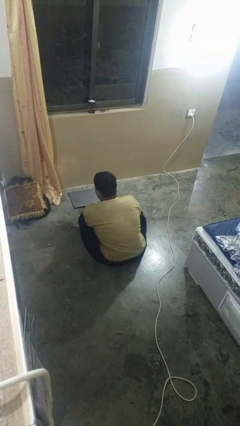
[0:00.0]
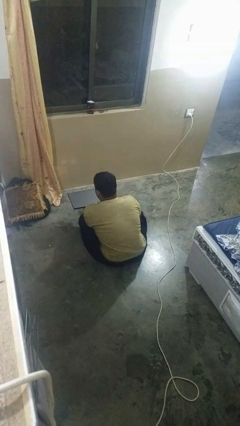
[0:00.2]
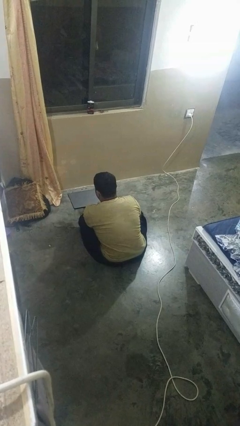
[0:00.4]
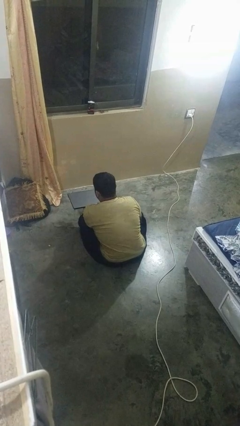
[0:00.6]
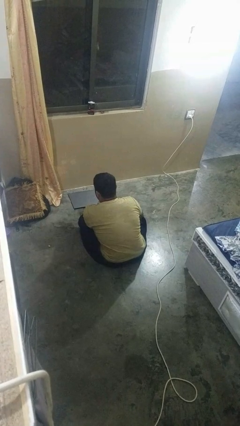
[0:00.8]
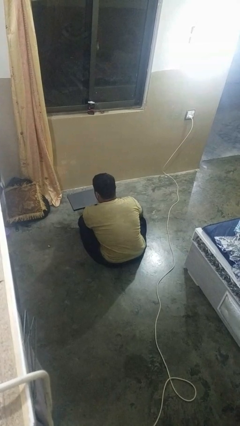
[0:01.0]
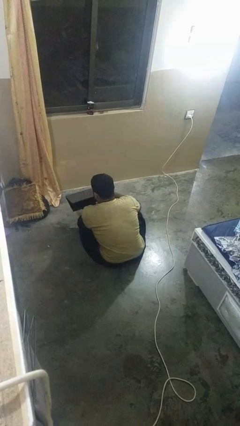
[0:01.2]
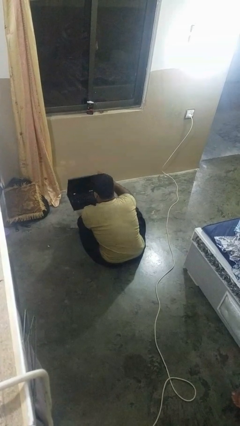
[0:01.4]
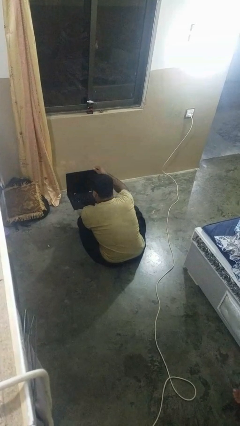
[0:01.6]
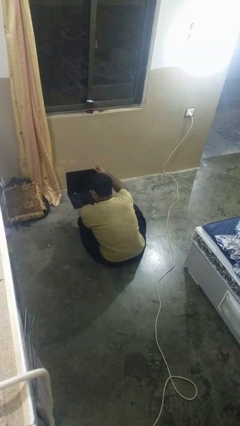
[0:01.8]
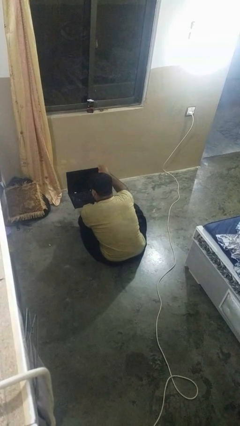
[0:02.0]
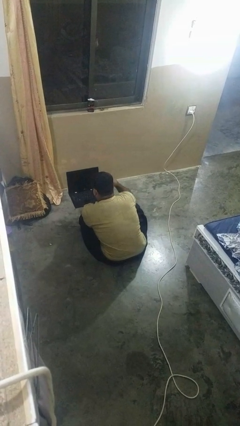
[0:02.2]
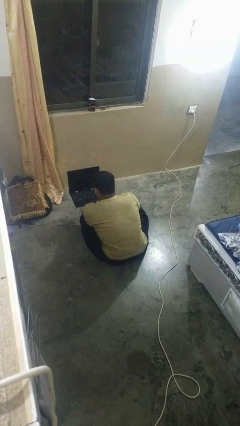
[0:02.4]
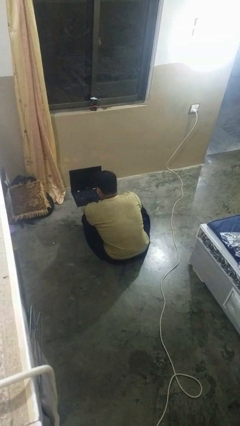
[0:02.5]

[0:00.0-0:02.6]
person opens laptop

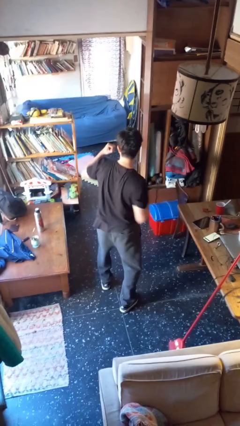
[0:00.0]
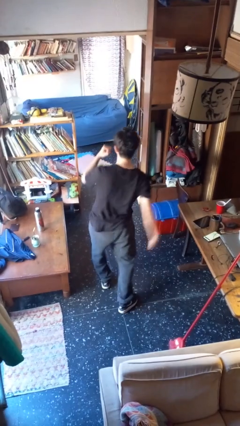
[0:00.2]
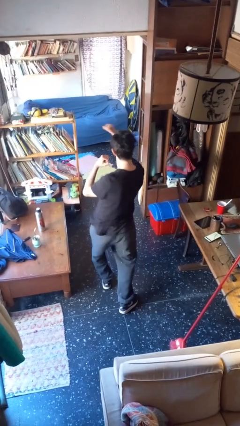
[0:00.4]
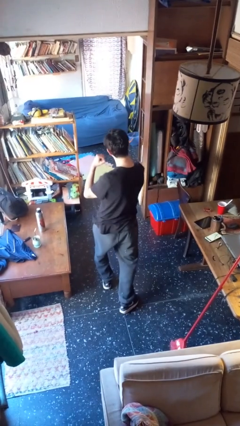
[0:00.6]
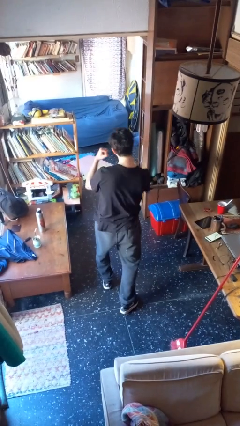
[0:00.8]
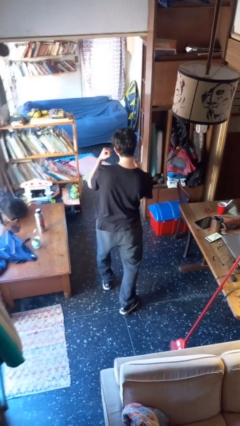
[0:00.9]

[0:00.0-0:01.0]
person punches

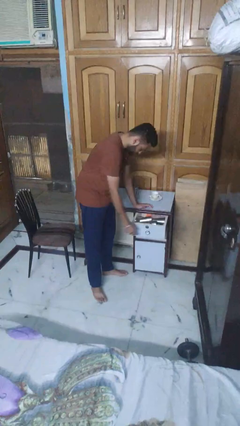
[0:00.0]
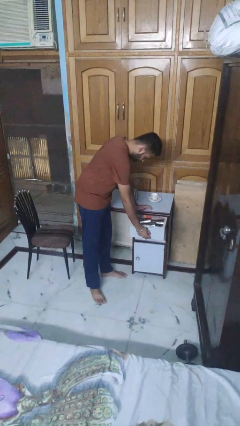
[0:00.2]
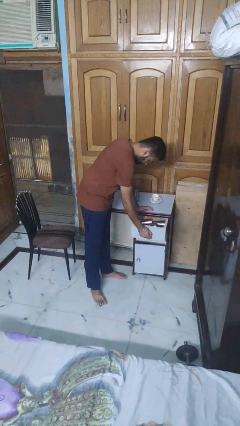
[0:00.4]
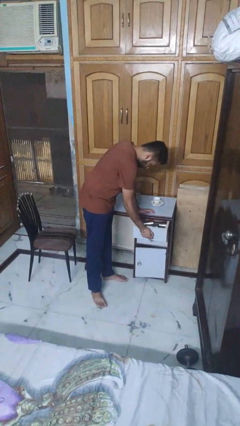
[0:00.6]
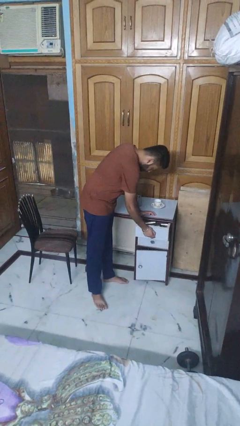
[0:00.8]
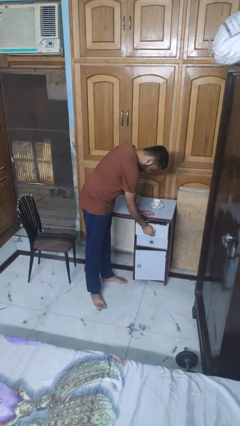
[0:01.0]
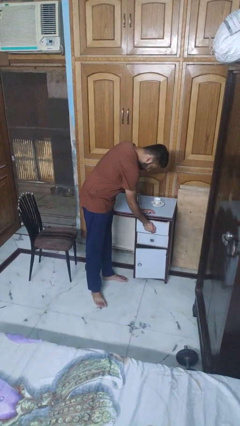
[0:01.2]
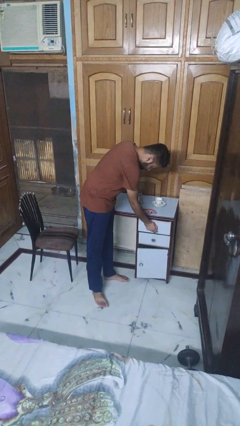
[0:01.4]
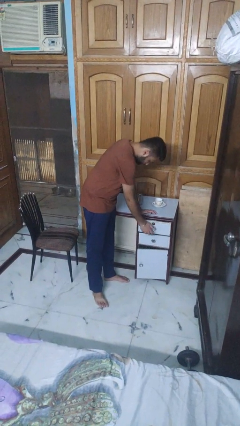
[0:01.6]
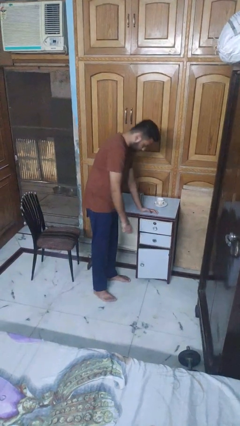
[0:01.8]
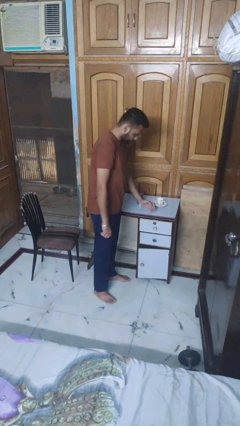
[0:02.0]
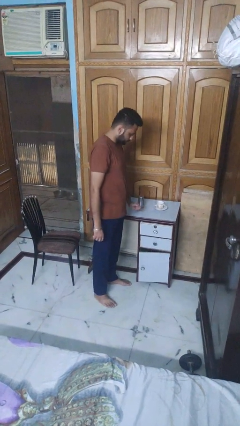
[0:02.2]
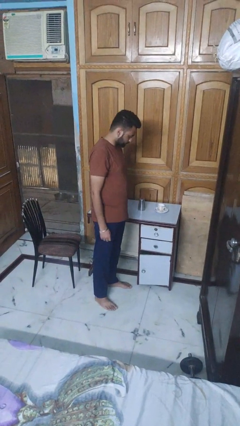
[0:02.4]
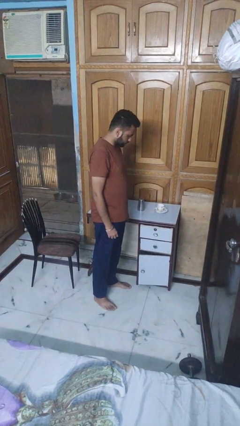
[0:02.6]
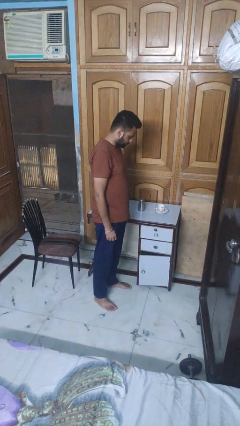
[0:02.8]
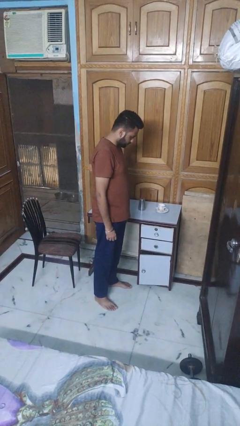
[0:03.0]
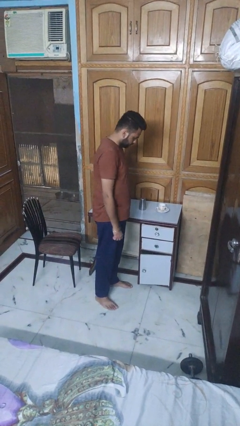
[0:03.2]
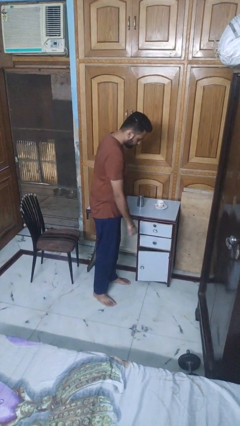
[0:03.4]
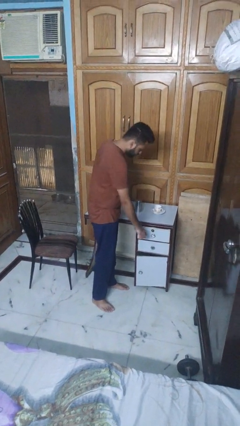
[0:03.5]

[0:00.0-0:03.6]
person closes kitchen drawer

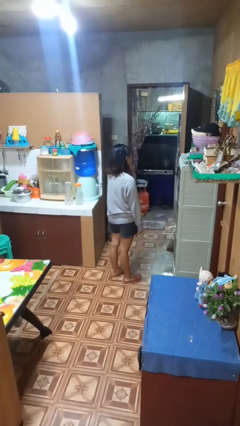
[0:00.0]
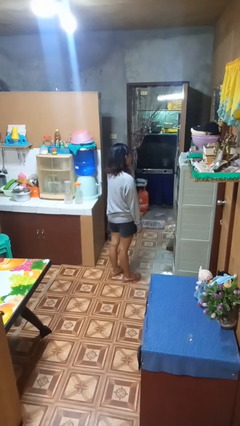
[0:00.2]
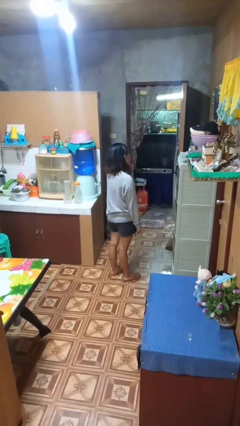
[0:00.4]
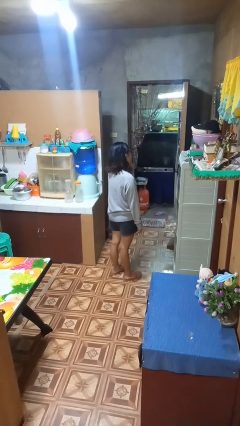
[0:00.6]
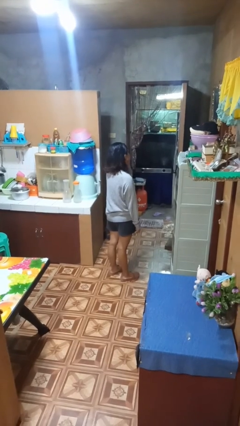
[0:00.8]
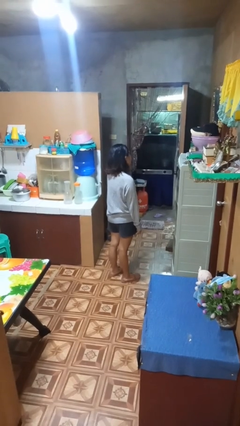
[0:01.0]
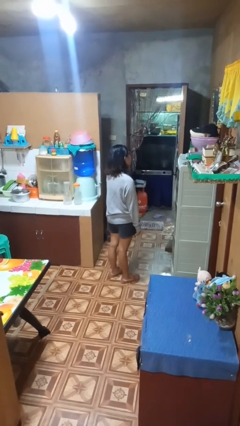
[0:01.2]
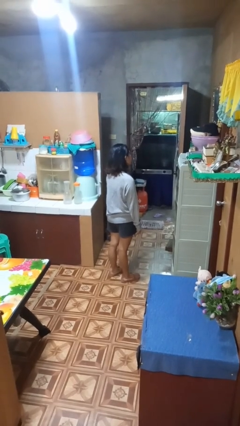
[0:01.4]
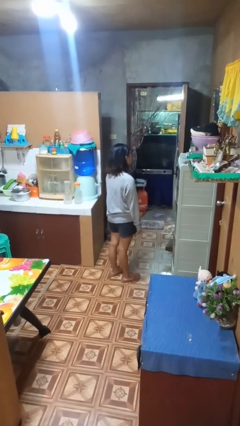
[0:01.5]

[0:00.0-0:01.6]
person strokes chin

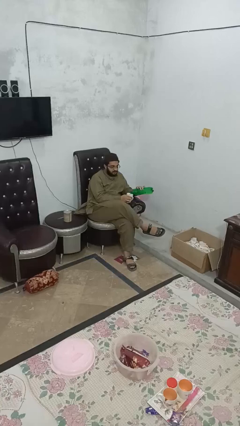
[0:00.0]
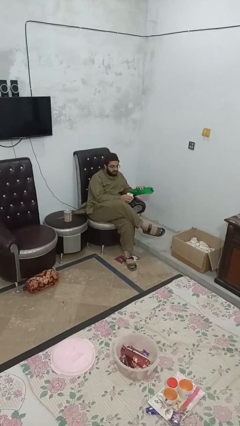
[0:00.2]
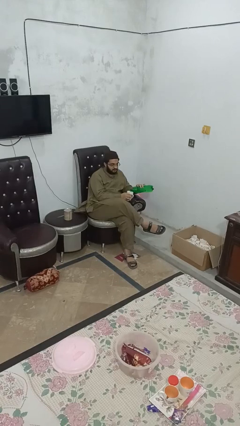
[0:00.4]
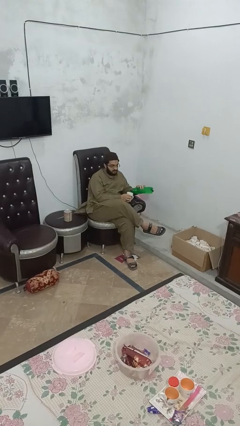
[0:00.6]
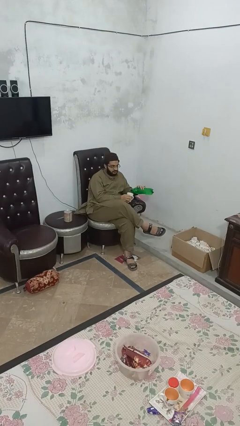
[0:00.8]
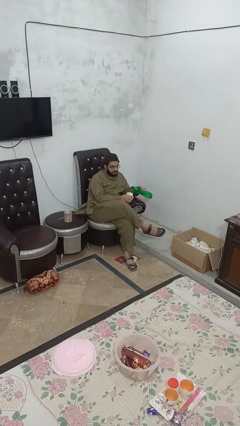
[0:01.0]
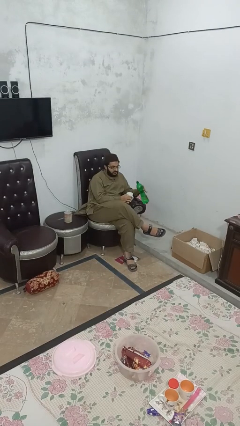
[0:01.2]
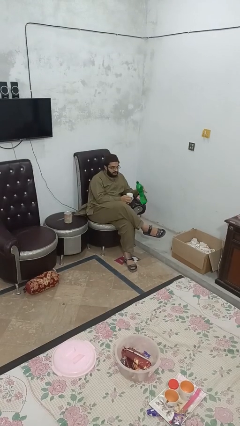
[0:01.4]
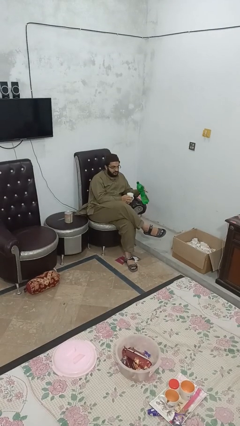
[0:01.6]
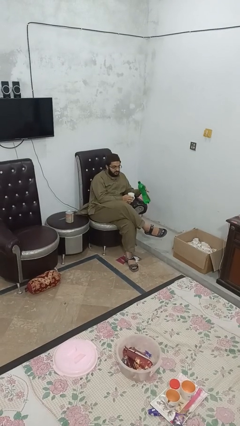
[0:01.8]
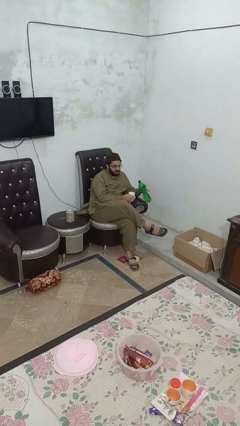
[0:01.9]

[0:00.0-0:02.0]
person pours liquid into cup

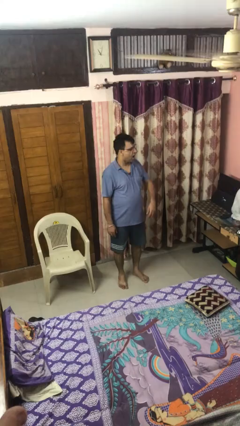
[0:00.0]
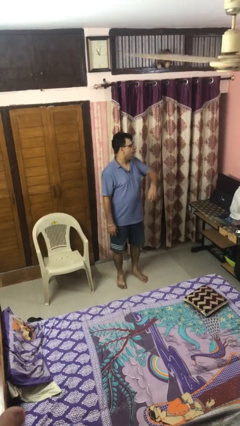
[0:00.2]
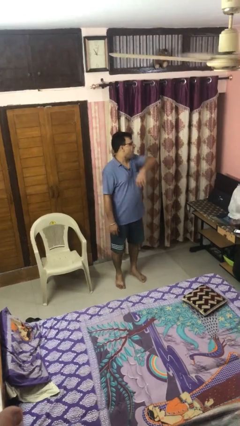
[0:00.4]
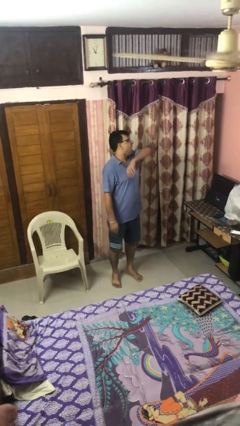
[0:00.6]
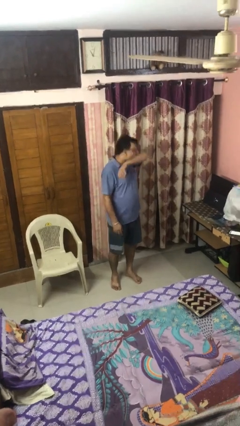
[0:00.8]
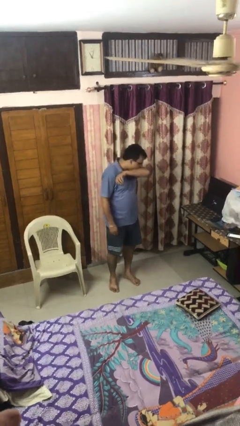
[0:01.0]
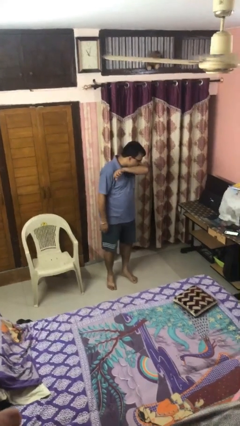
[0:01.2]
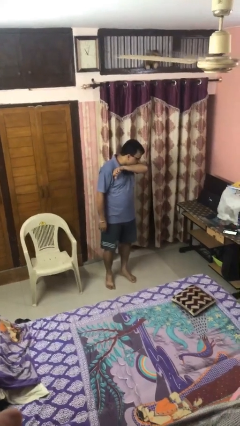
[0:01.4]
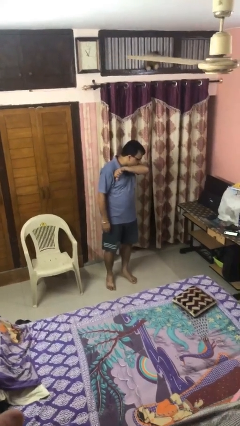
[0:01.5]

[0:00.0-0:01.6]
person sneezes into arm

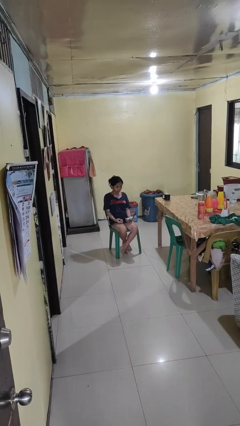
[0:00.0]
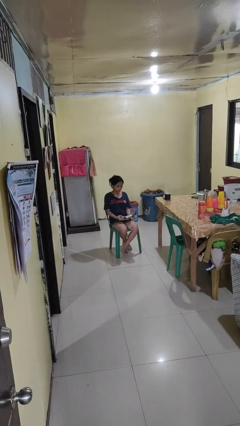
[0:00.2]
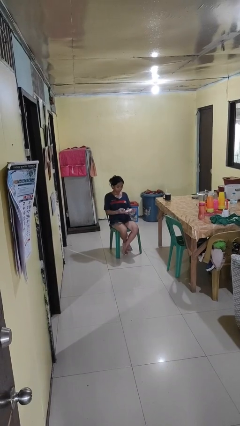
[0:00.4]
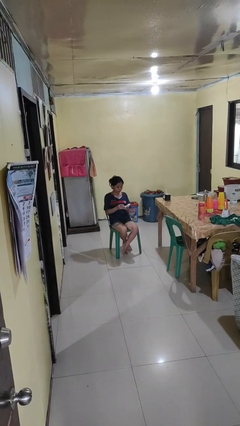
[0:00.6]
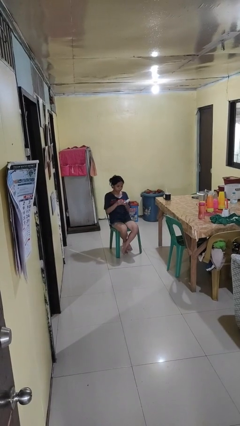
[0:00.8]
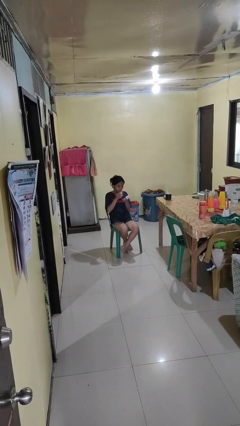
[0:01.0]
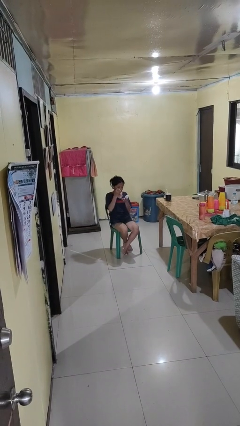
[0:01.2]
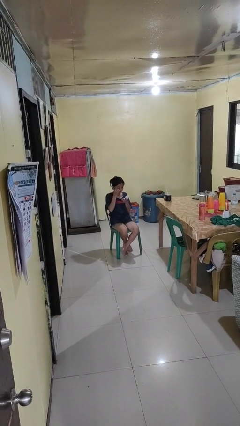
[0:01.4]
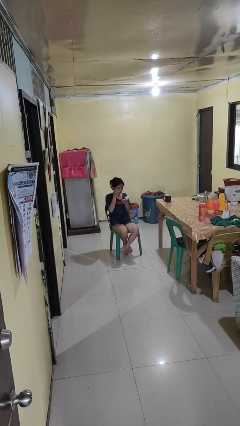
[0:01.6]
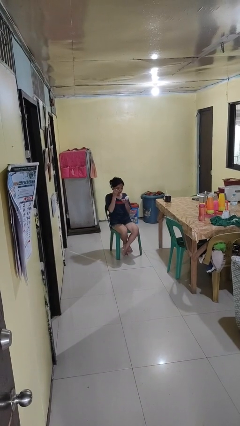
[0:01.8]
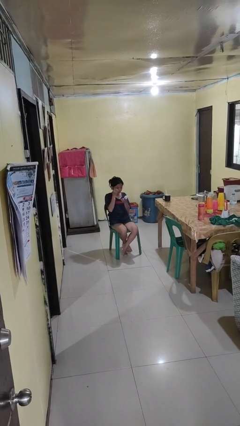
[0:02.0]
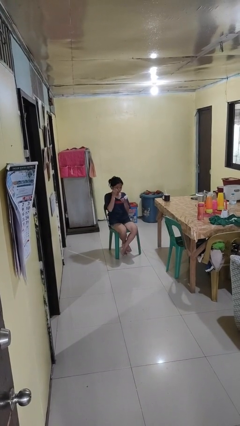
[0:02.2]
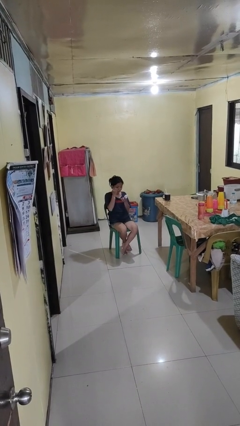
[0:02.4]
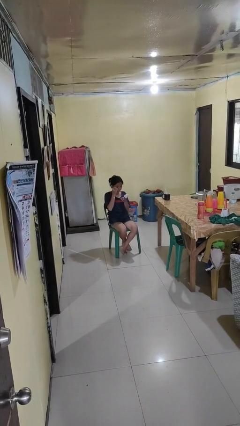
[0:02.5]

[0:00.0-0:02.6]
person applies eye makeup

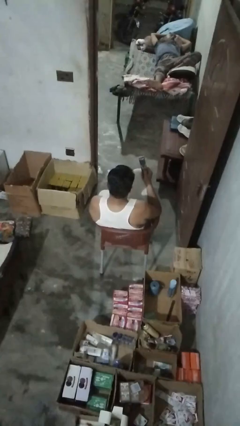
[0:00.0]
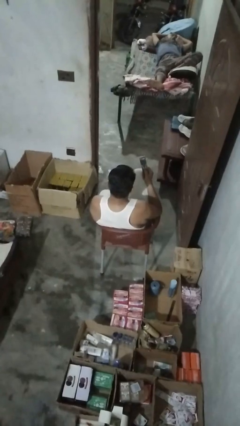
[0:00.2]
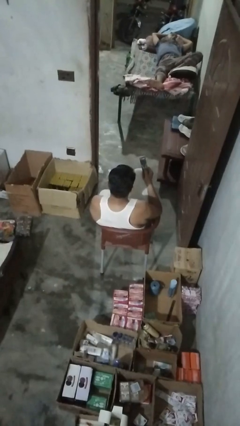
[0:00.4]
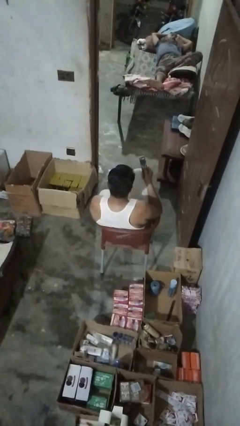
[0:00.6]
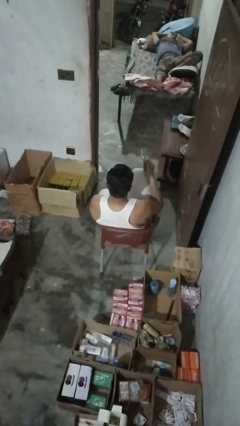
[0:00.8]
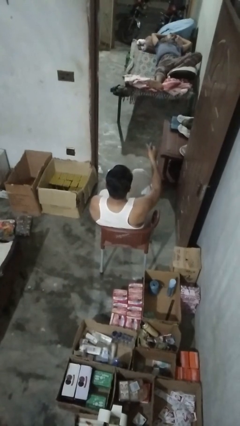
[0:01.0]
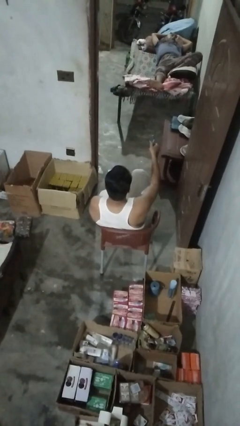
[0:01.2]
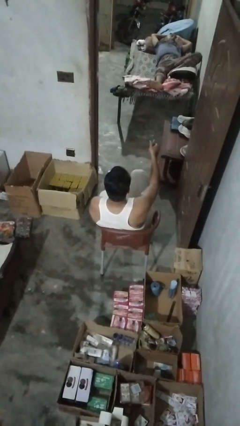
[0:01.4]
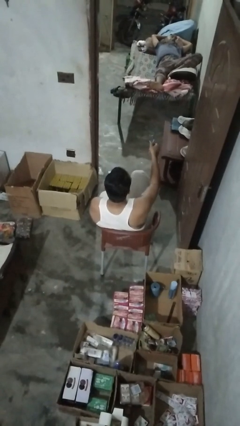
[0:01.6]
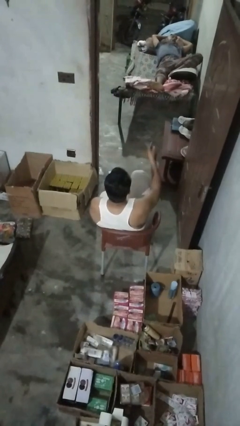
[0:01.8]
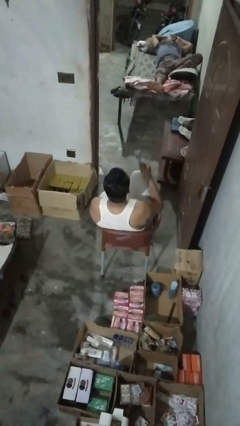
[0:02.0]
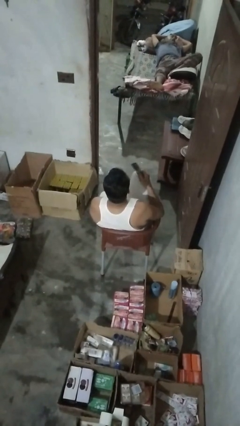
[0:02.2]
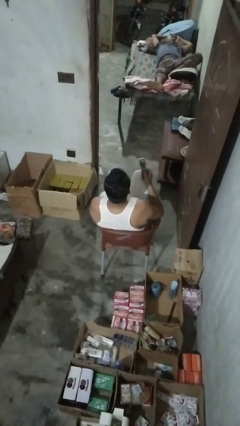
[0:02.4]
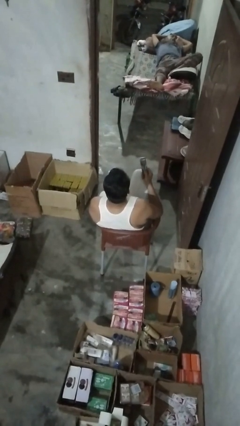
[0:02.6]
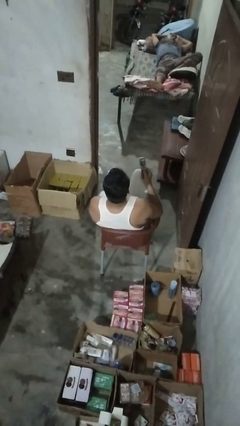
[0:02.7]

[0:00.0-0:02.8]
person uses television remote
